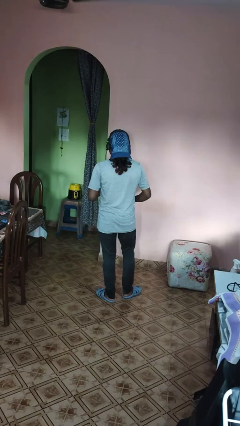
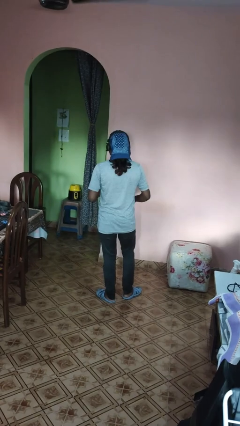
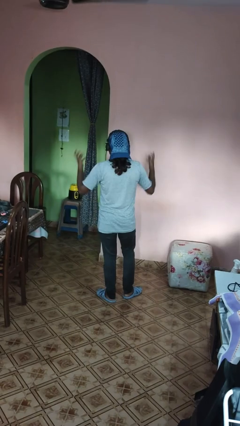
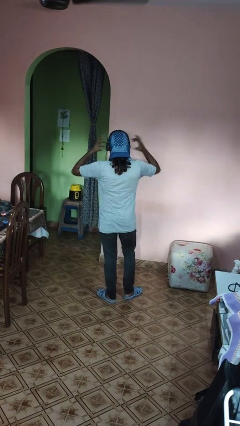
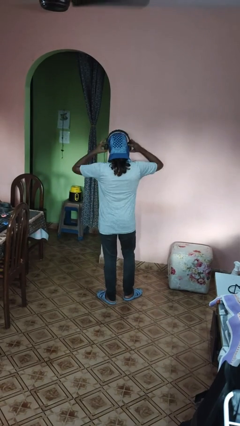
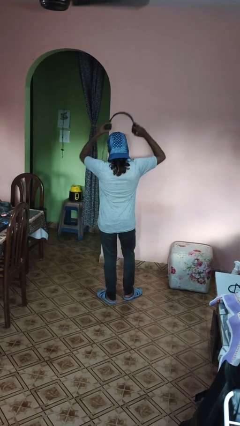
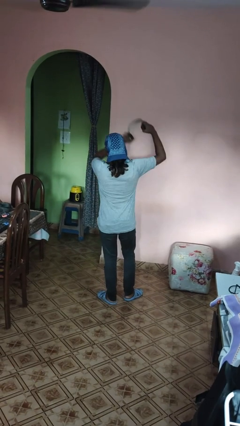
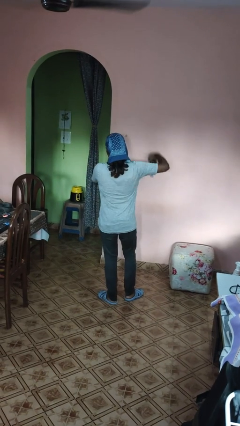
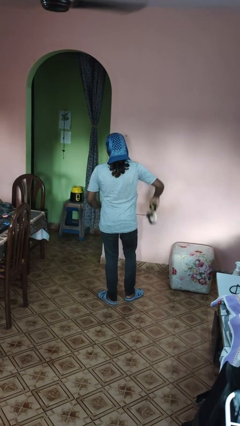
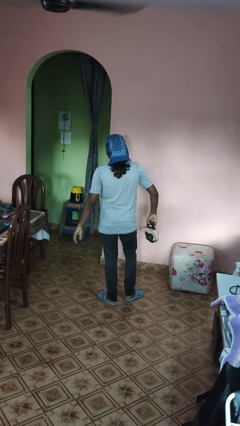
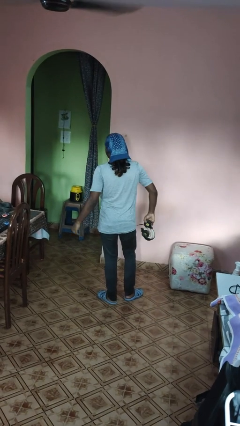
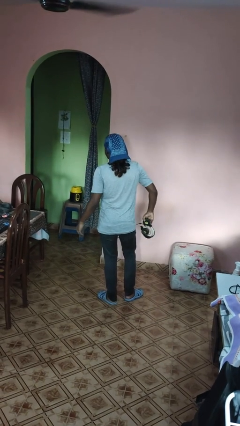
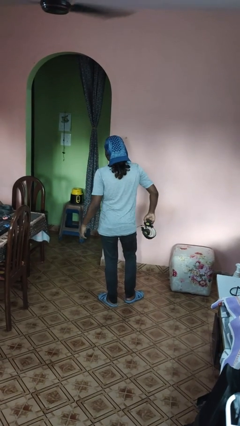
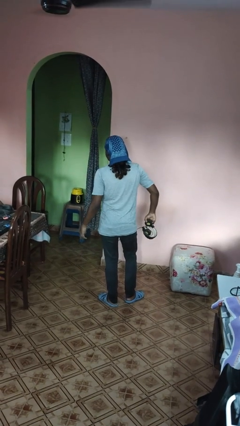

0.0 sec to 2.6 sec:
person takes off headphones

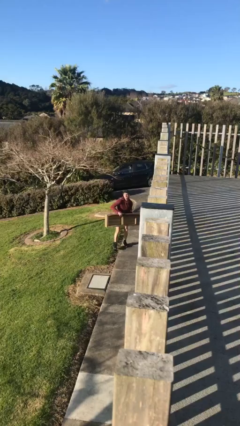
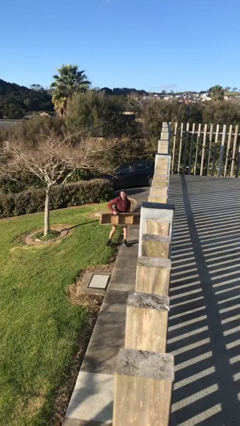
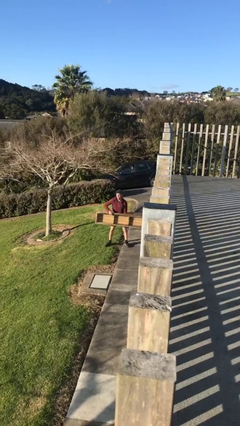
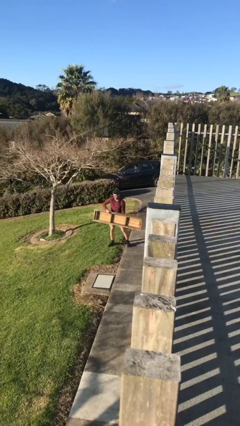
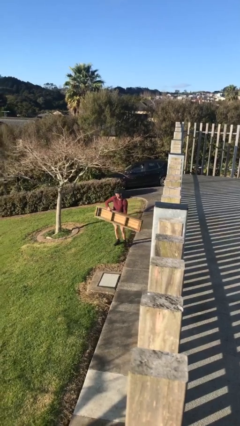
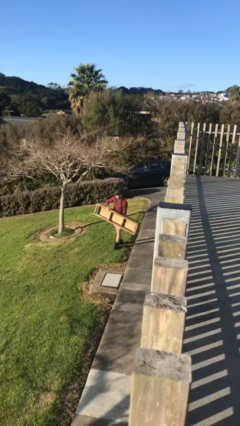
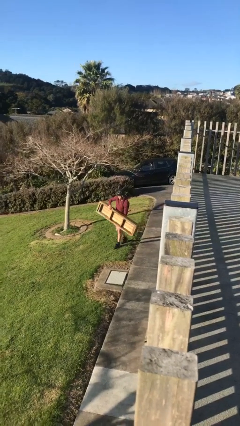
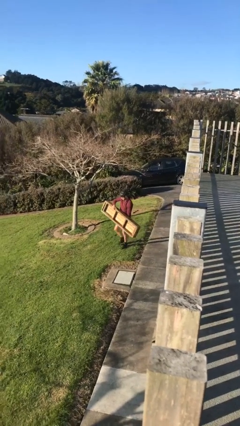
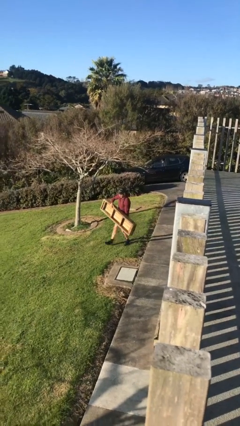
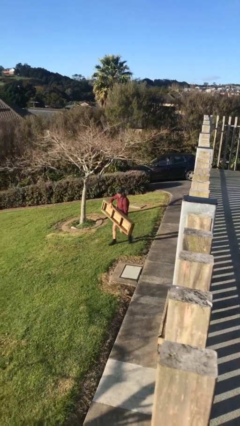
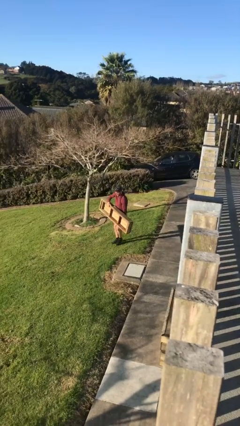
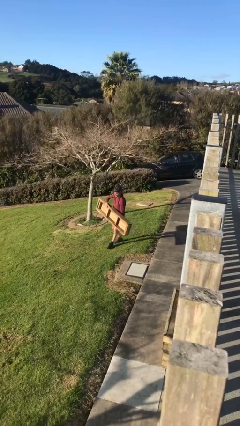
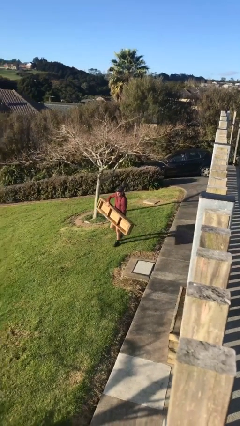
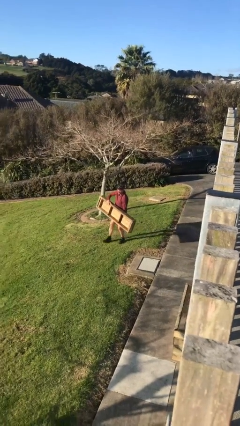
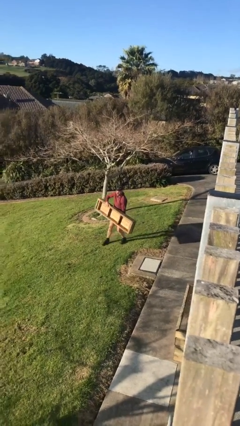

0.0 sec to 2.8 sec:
person carries heavy object

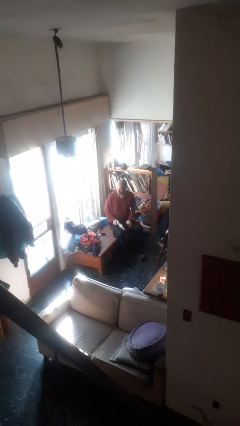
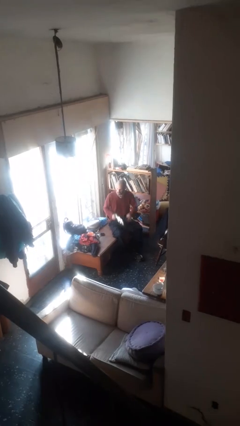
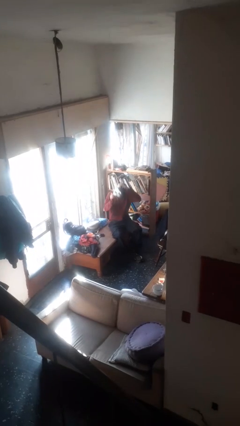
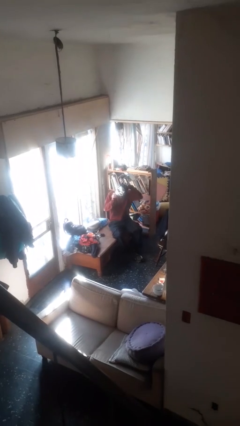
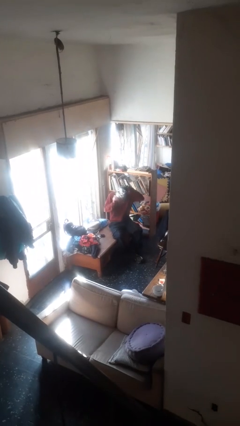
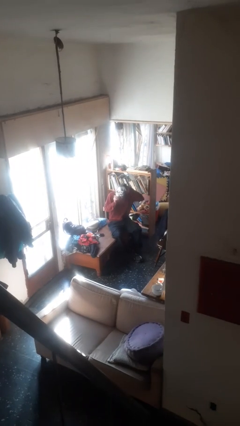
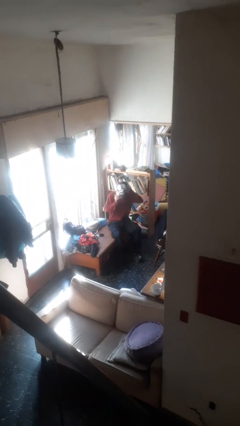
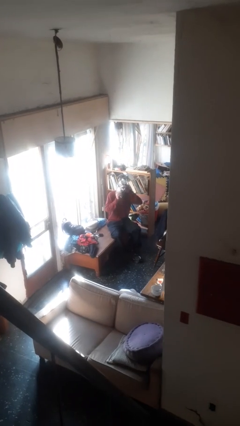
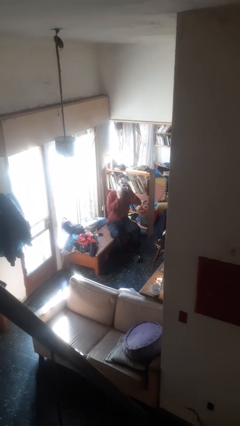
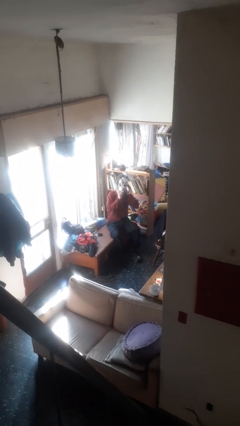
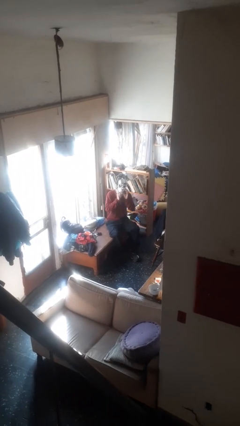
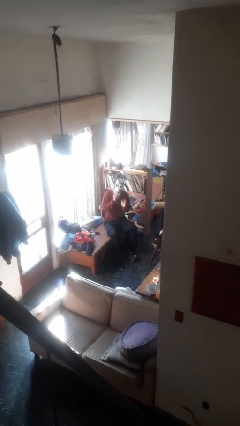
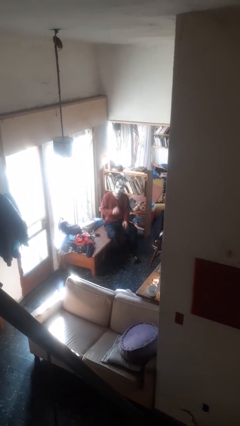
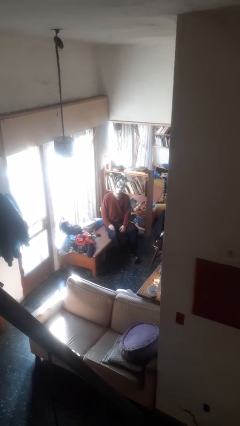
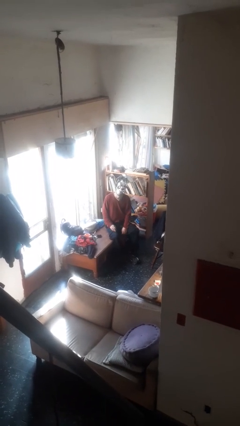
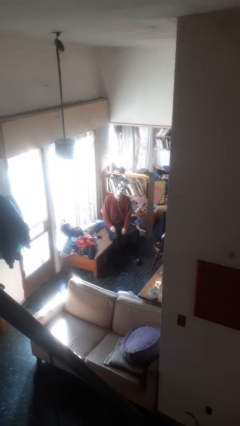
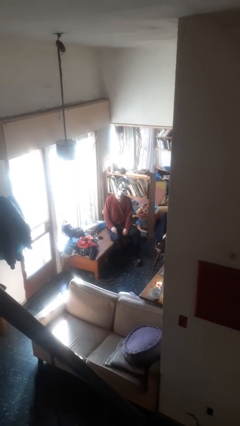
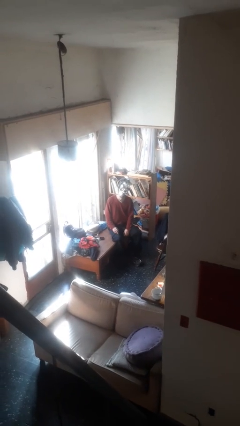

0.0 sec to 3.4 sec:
person puts on facemask

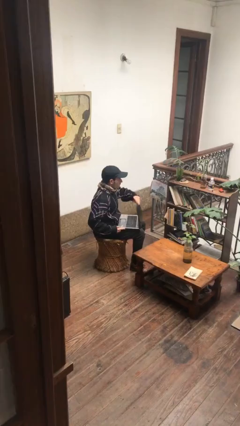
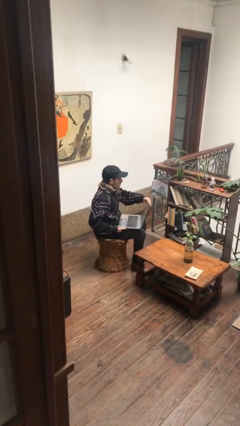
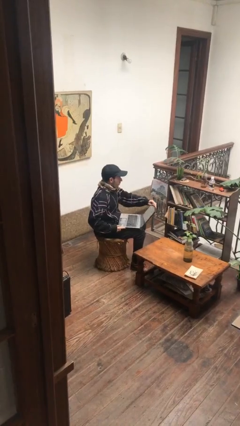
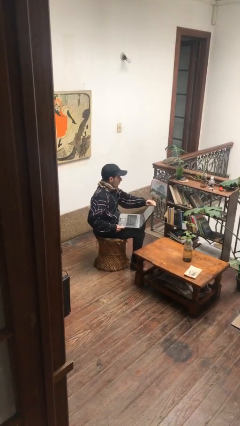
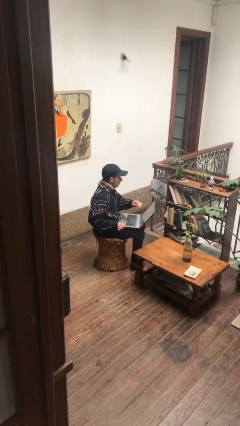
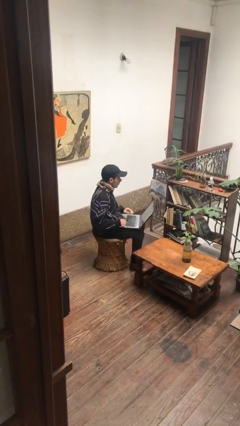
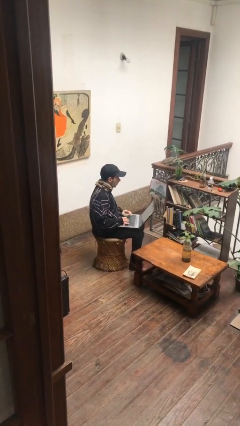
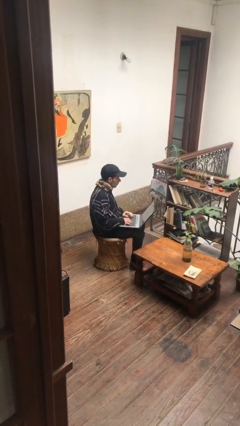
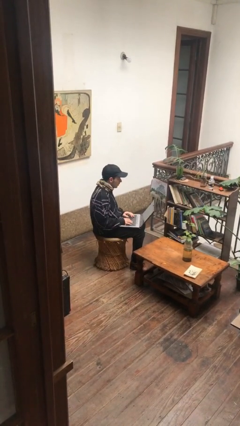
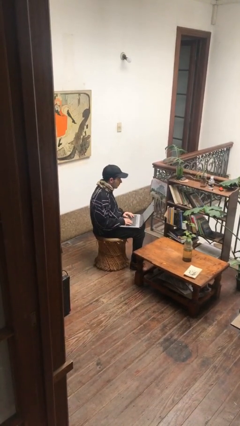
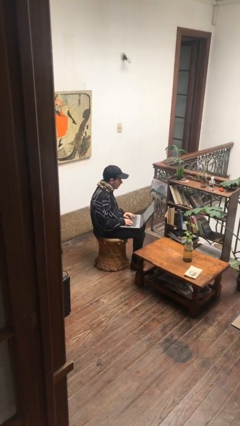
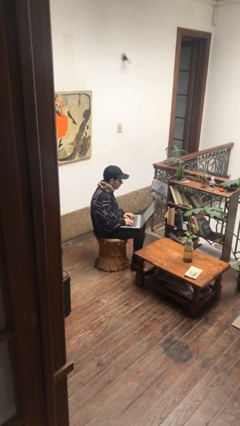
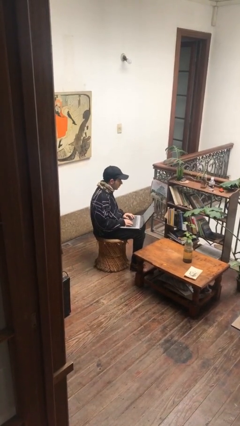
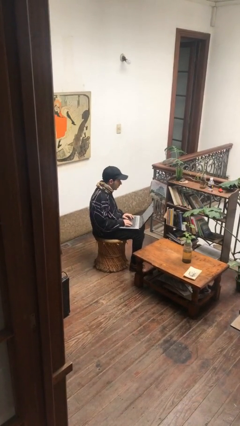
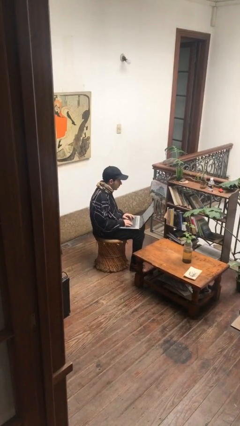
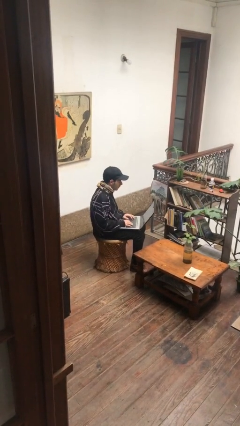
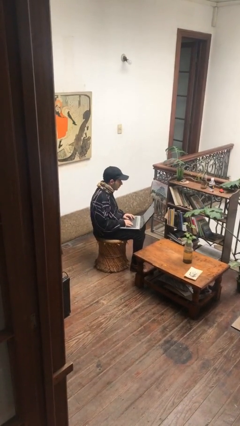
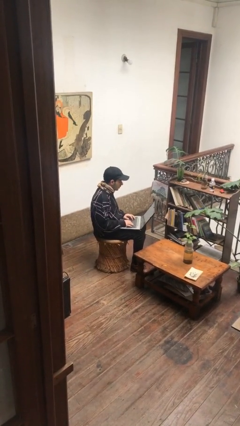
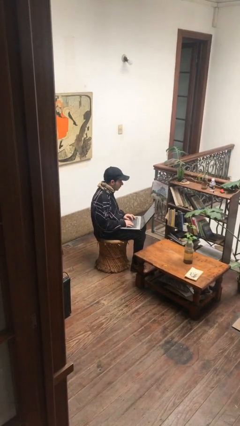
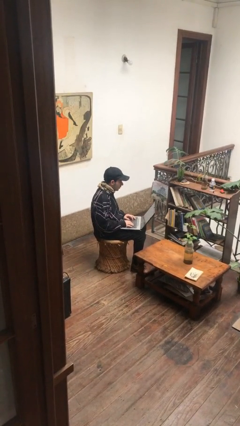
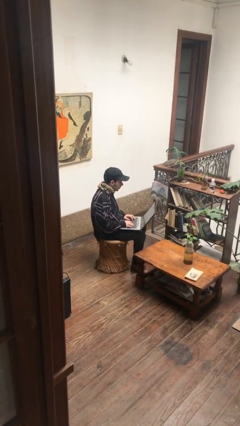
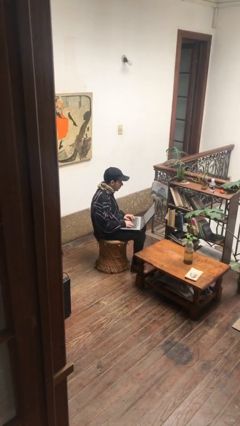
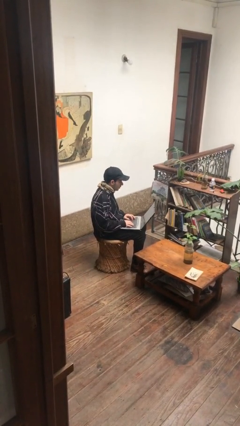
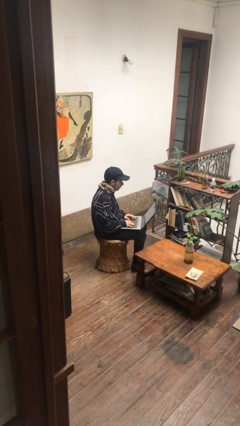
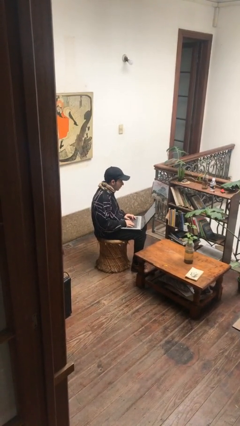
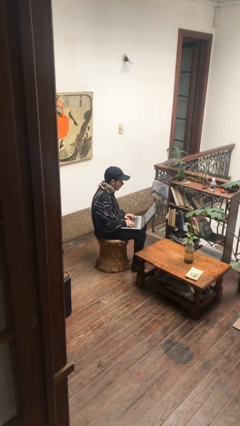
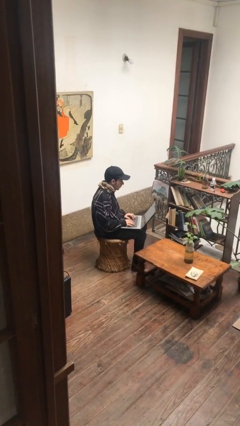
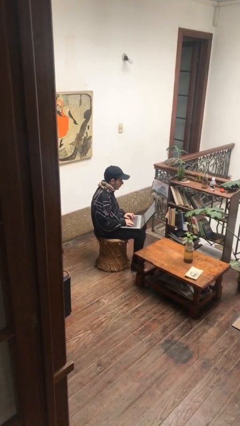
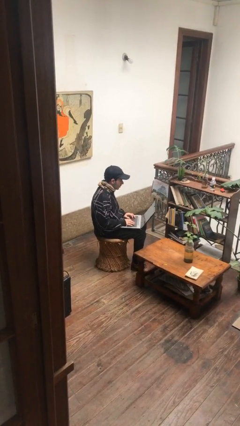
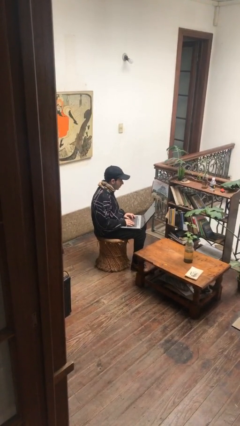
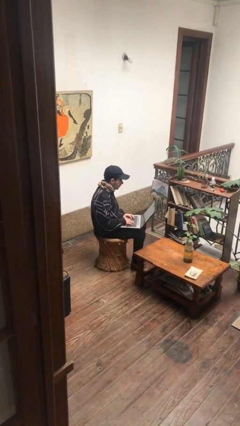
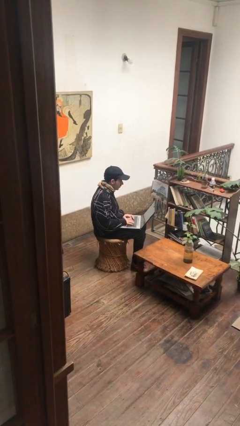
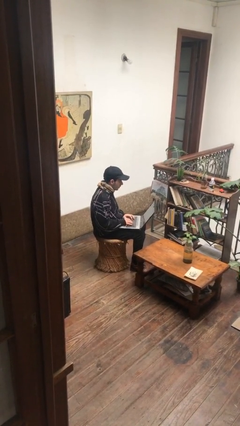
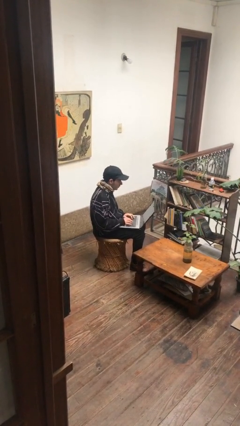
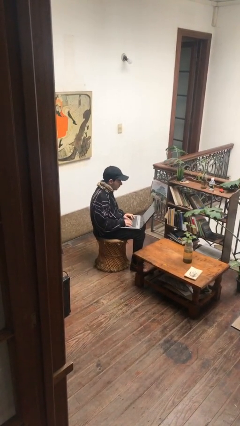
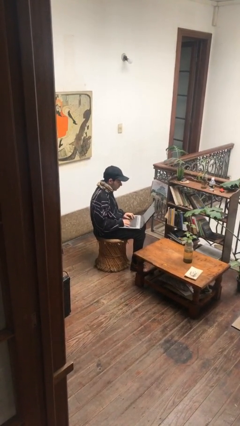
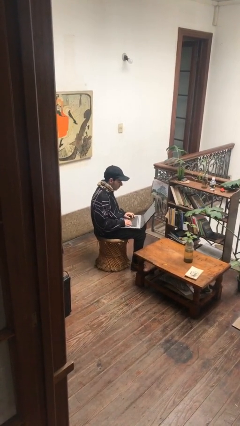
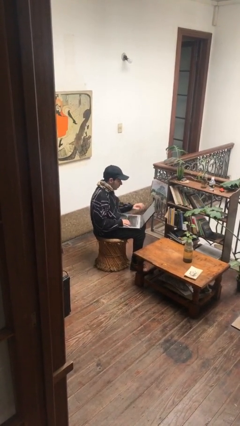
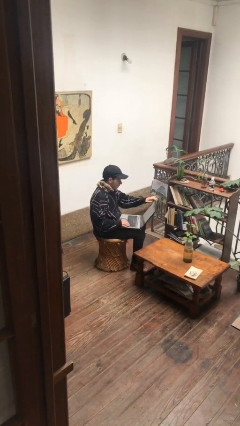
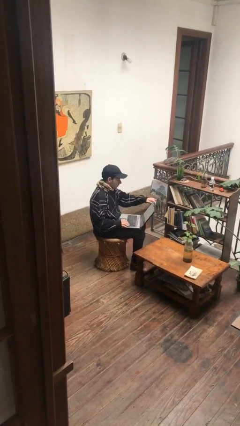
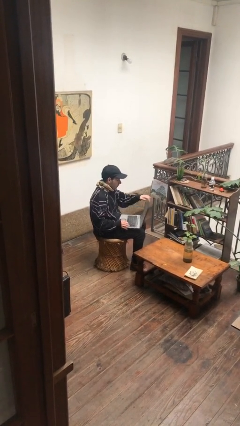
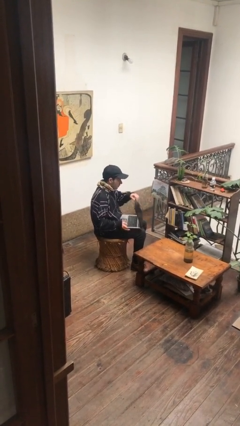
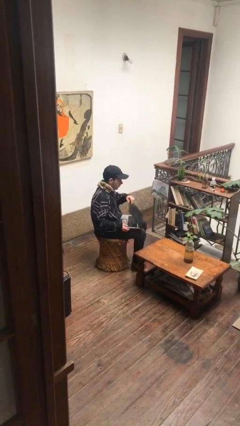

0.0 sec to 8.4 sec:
person interacts with laptop

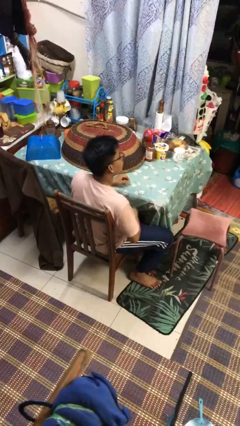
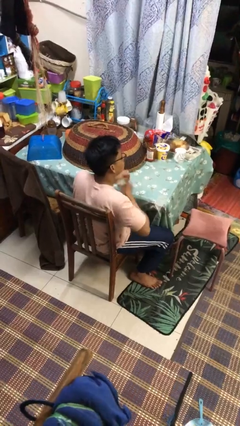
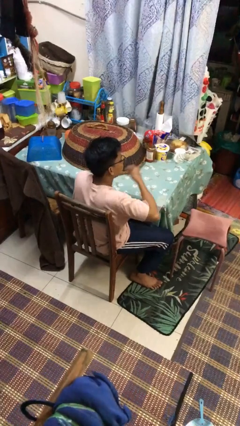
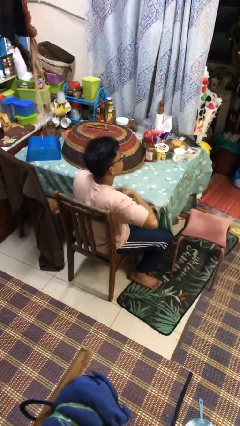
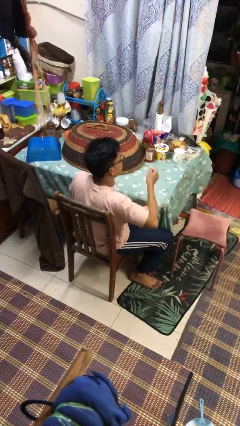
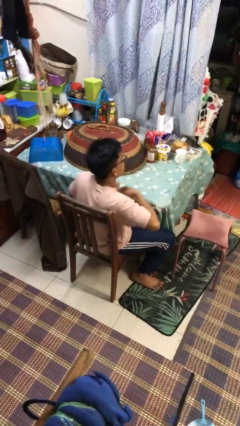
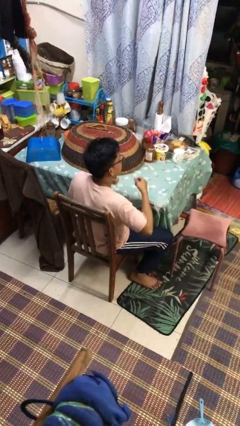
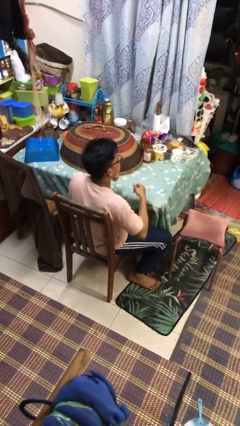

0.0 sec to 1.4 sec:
person drums on chest
